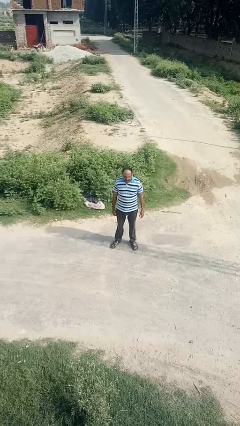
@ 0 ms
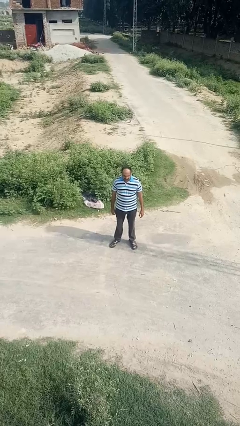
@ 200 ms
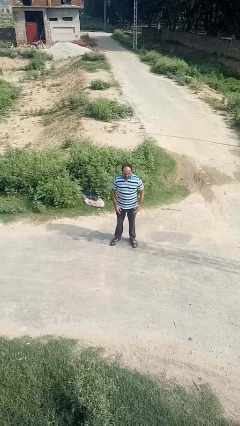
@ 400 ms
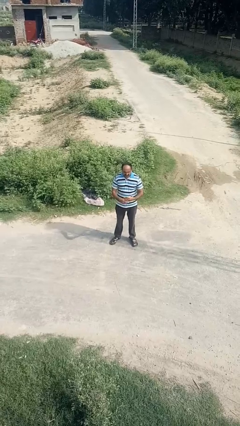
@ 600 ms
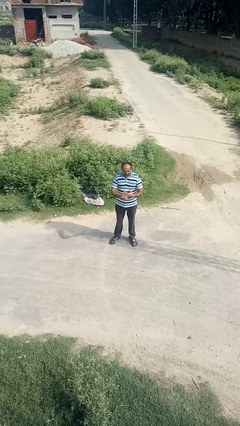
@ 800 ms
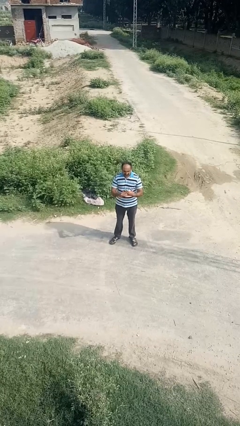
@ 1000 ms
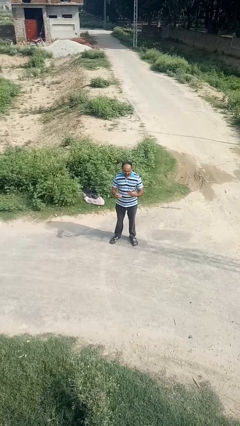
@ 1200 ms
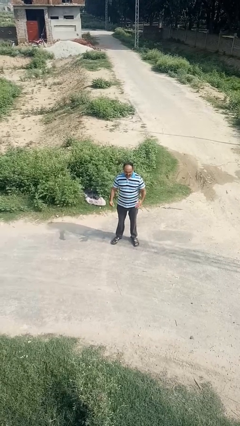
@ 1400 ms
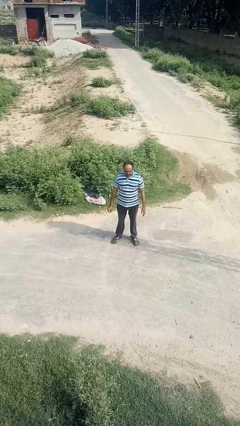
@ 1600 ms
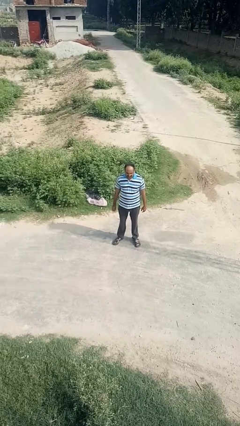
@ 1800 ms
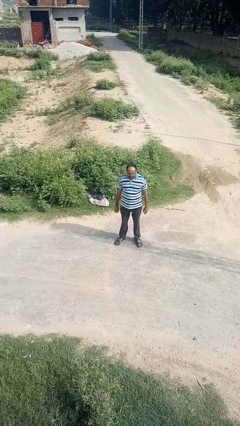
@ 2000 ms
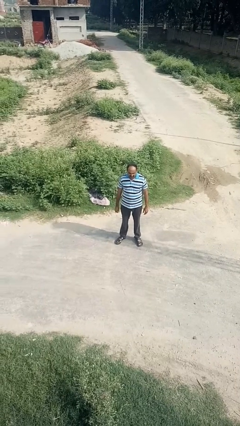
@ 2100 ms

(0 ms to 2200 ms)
person takes off ring

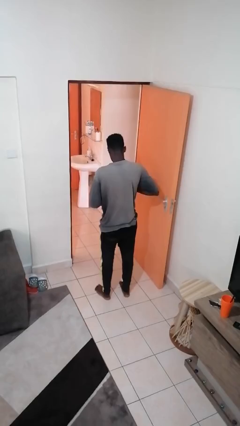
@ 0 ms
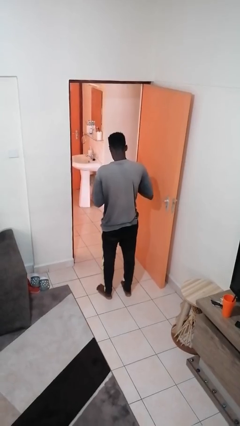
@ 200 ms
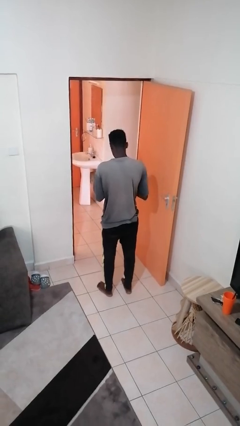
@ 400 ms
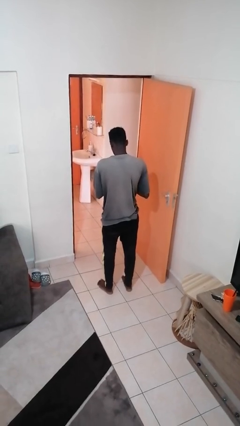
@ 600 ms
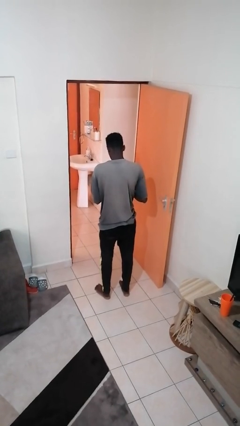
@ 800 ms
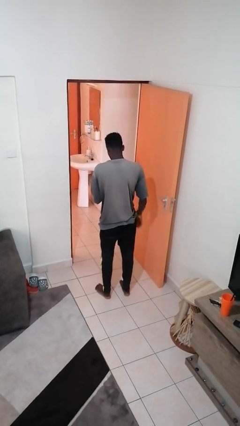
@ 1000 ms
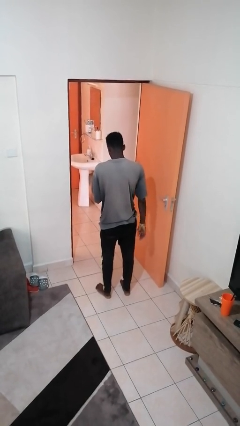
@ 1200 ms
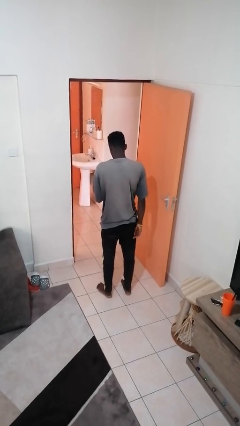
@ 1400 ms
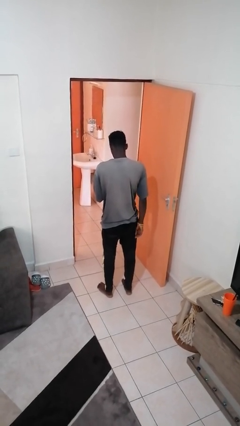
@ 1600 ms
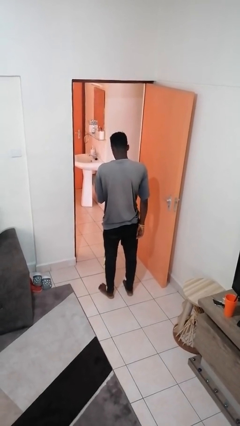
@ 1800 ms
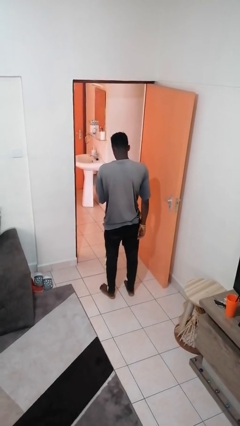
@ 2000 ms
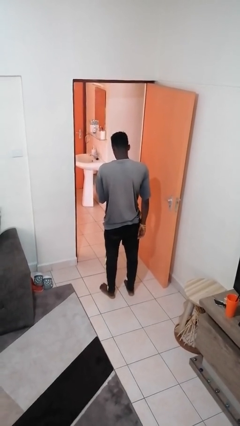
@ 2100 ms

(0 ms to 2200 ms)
person takes phone from pocket

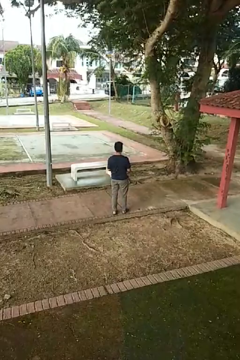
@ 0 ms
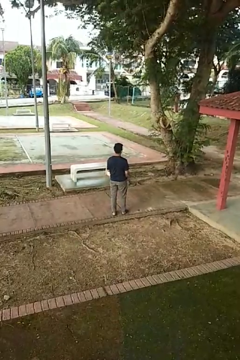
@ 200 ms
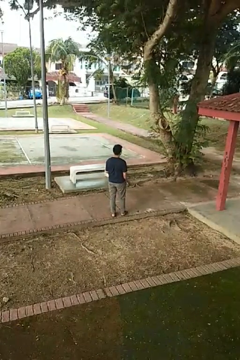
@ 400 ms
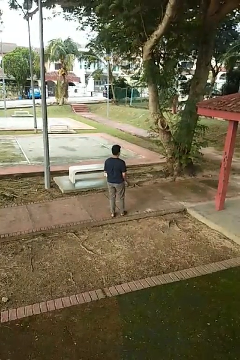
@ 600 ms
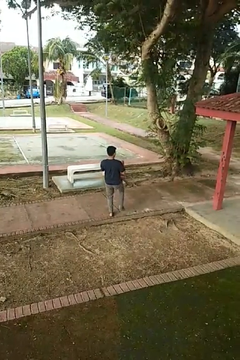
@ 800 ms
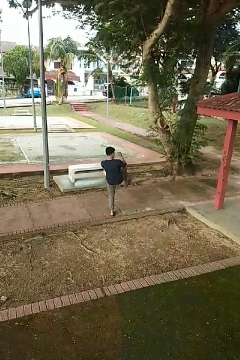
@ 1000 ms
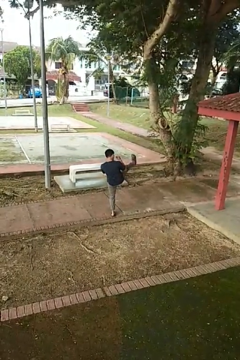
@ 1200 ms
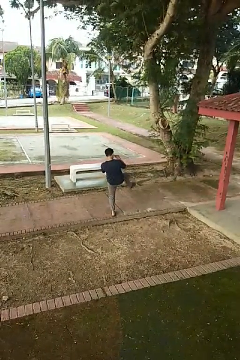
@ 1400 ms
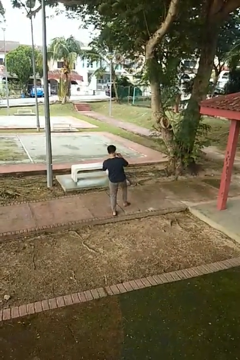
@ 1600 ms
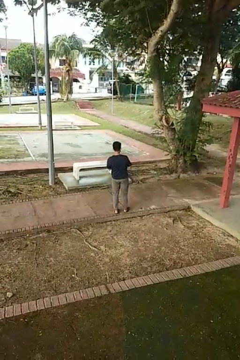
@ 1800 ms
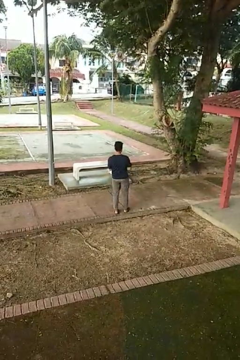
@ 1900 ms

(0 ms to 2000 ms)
person karate kicks

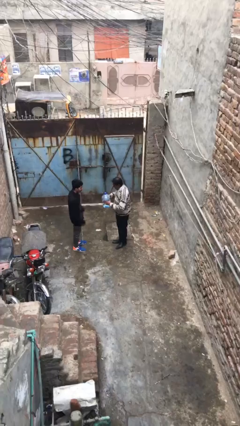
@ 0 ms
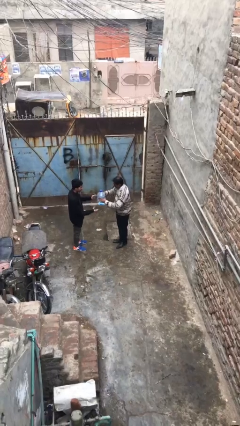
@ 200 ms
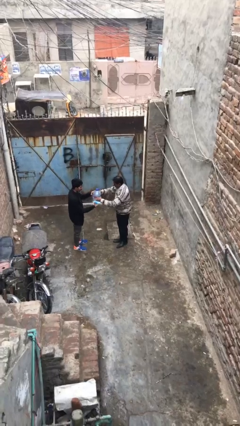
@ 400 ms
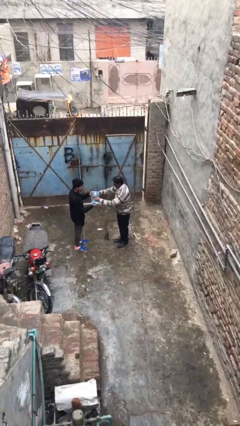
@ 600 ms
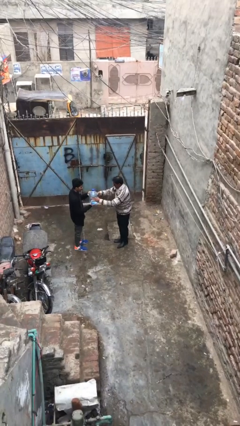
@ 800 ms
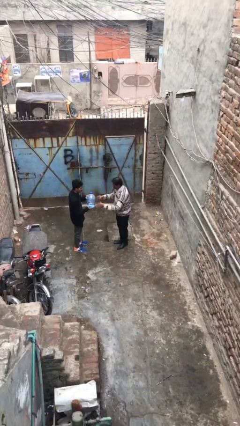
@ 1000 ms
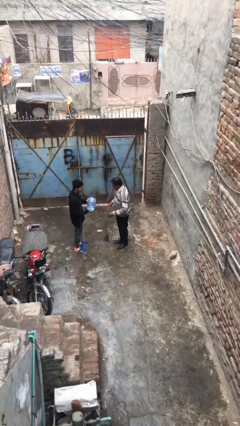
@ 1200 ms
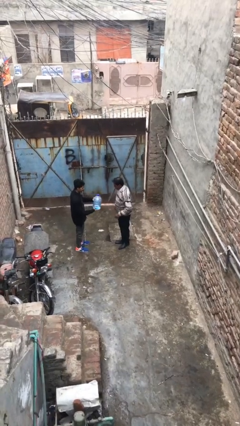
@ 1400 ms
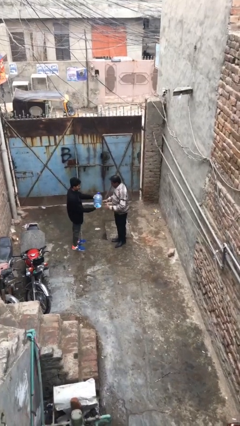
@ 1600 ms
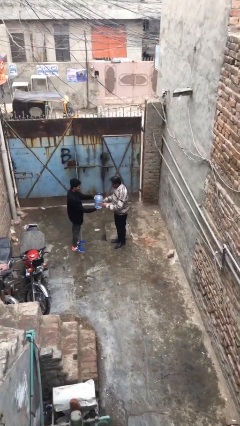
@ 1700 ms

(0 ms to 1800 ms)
person transfers object to person

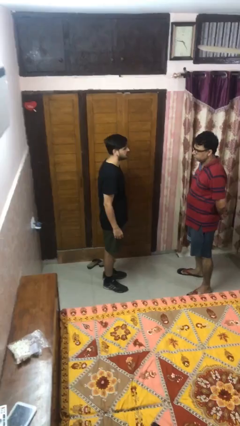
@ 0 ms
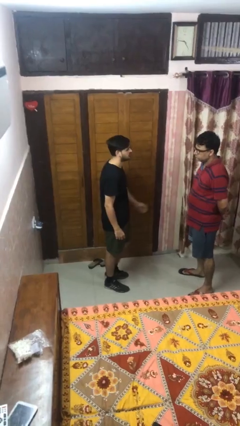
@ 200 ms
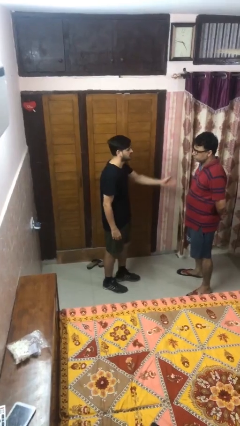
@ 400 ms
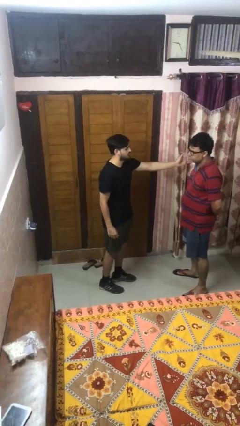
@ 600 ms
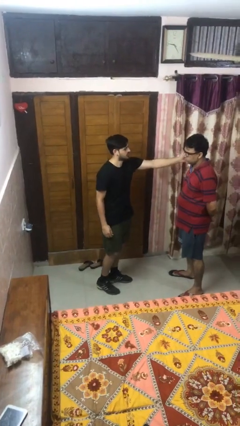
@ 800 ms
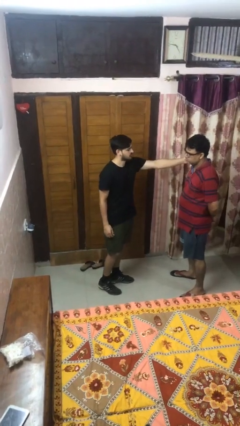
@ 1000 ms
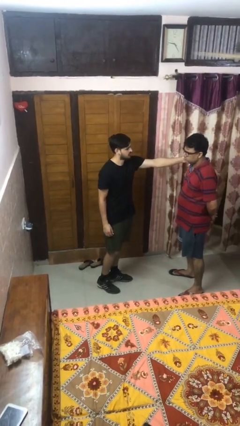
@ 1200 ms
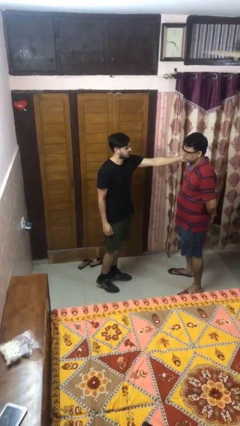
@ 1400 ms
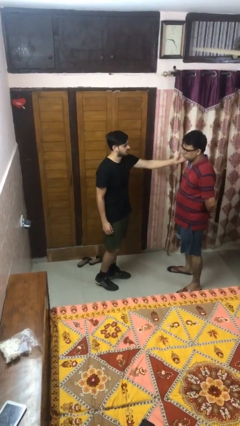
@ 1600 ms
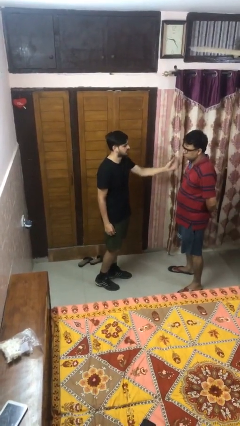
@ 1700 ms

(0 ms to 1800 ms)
person touches face of person

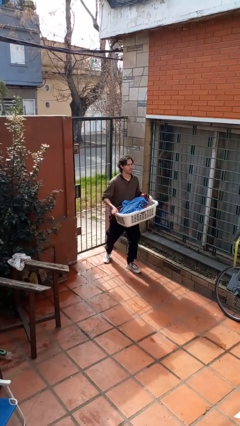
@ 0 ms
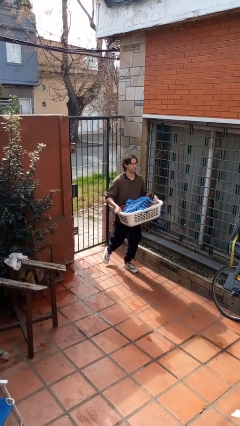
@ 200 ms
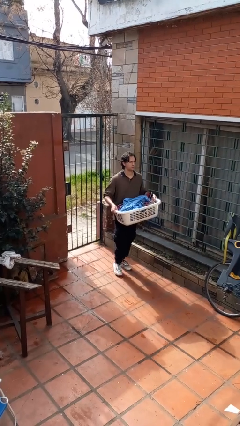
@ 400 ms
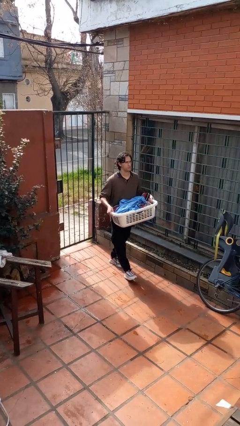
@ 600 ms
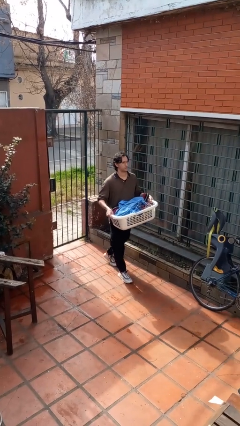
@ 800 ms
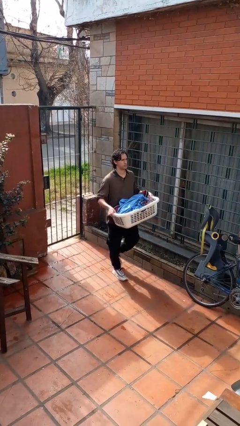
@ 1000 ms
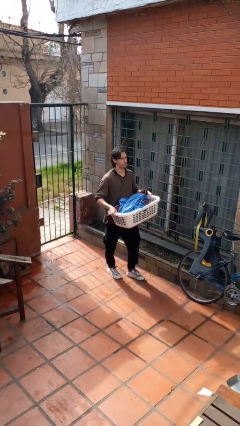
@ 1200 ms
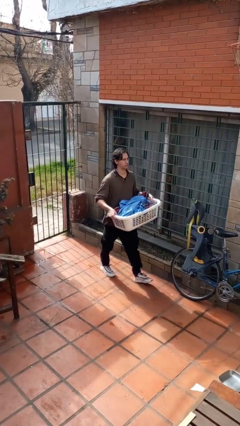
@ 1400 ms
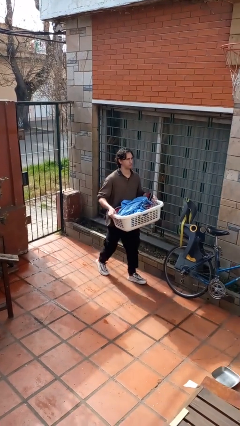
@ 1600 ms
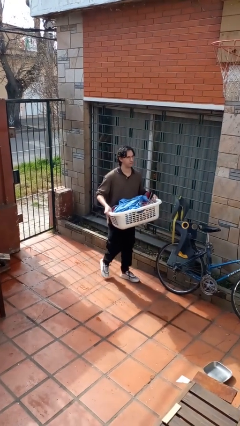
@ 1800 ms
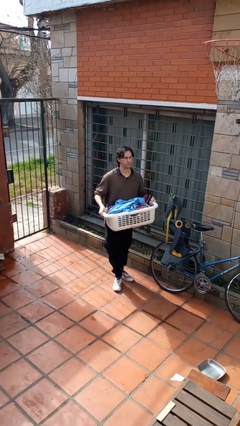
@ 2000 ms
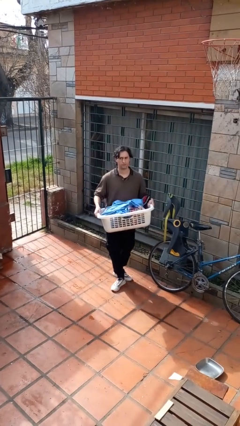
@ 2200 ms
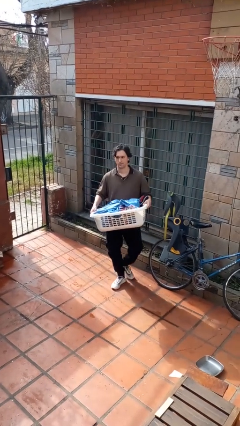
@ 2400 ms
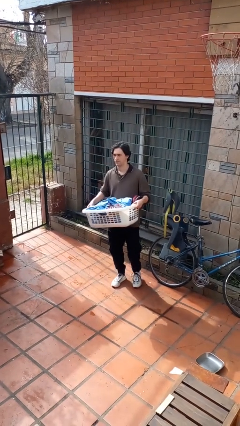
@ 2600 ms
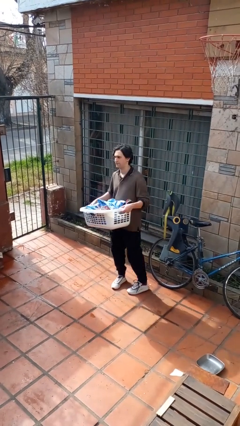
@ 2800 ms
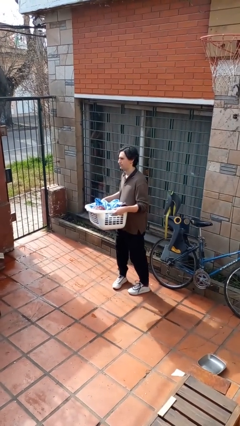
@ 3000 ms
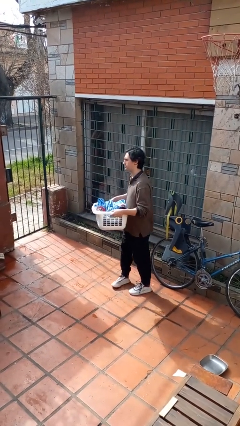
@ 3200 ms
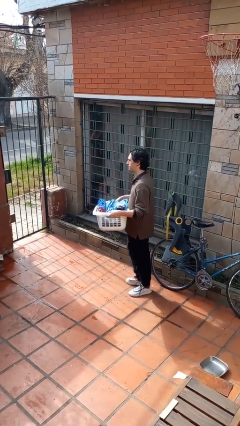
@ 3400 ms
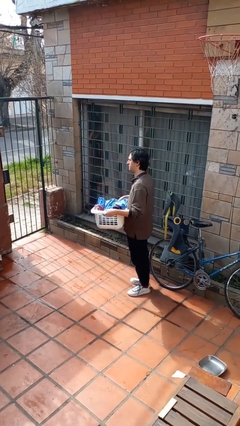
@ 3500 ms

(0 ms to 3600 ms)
person carries laundry basket

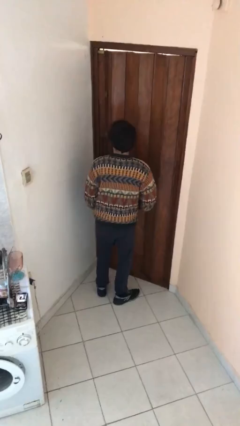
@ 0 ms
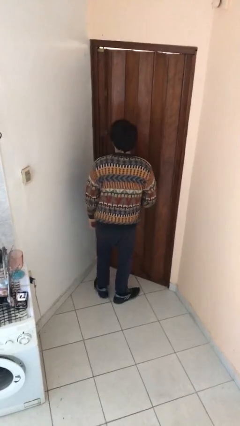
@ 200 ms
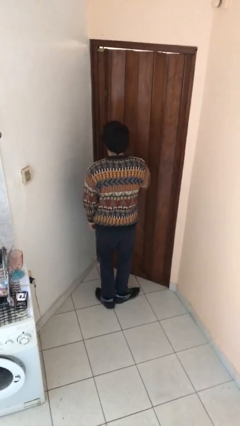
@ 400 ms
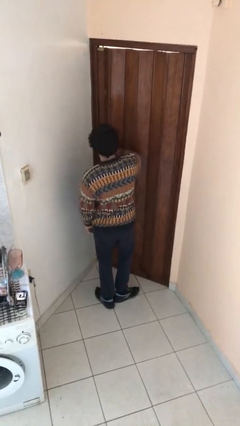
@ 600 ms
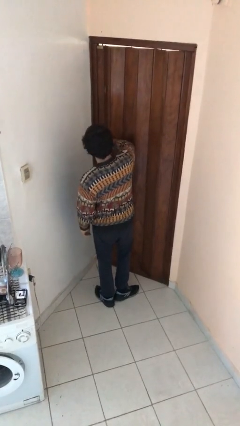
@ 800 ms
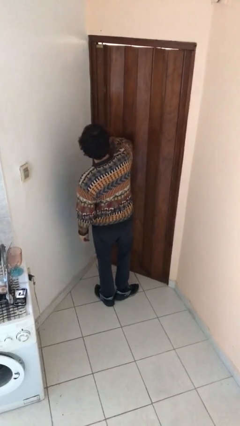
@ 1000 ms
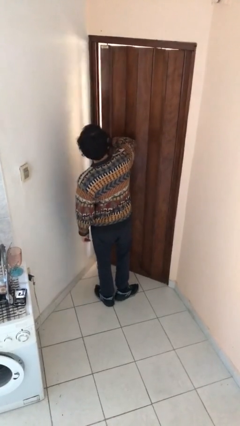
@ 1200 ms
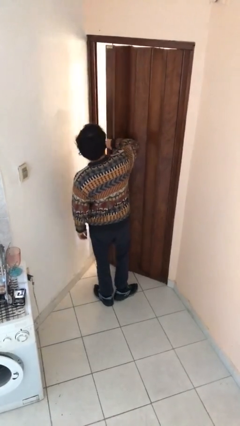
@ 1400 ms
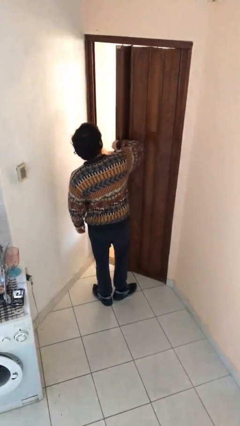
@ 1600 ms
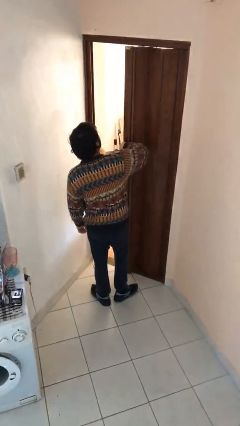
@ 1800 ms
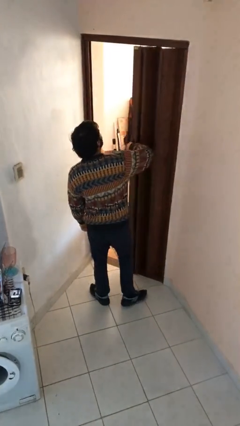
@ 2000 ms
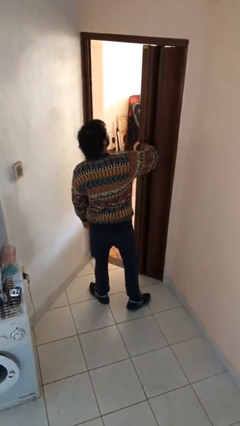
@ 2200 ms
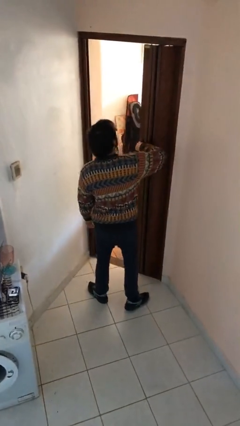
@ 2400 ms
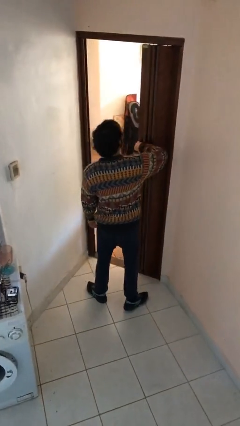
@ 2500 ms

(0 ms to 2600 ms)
person opens sliding door

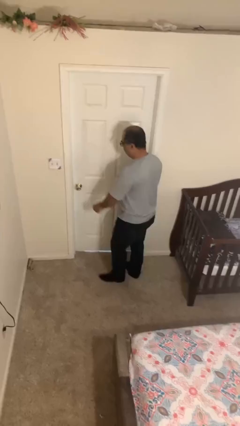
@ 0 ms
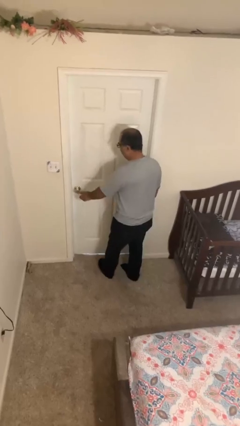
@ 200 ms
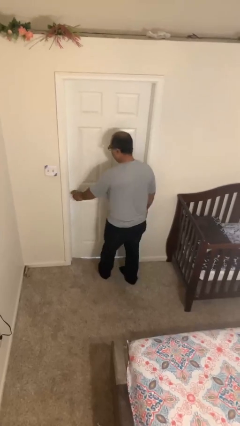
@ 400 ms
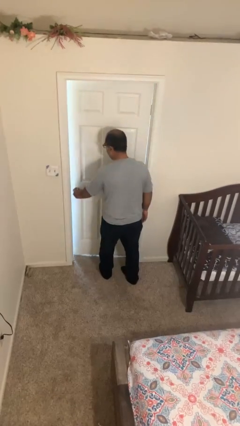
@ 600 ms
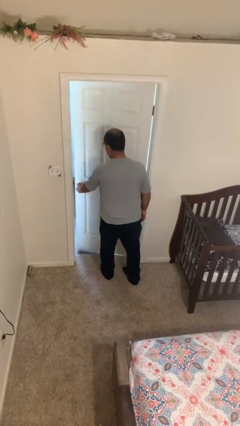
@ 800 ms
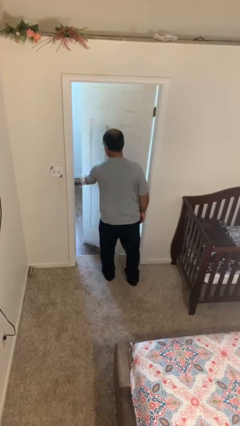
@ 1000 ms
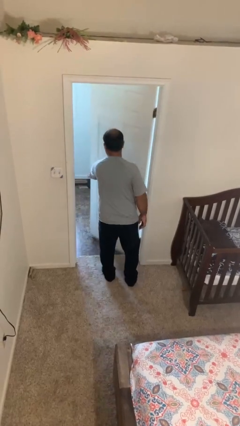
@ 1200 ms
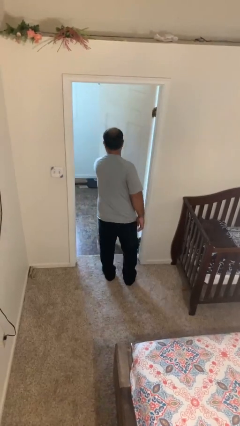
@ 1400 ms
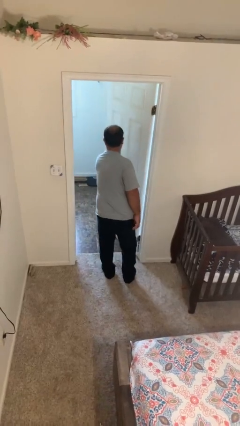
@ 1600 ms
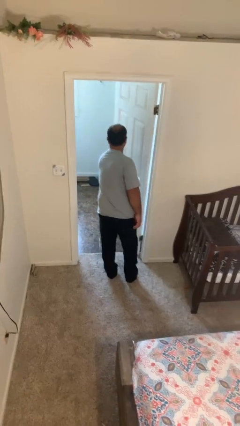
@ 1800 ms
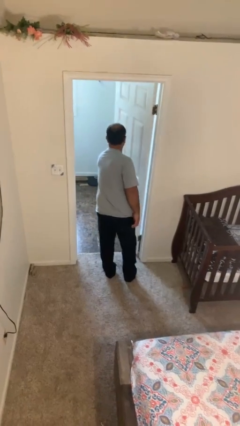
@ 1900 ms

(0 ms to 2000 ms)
person opens facility door
